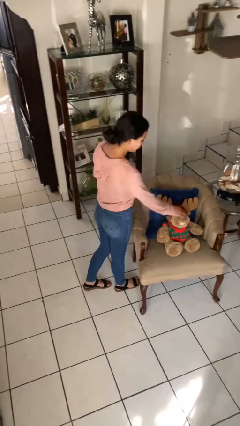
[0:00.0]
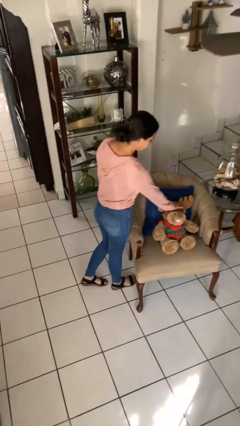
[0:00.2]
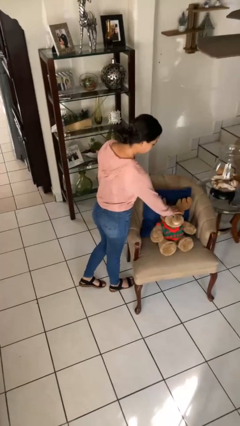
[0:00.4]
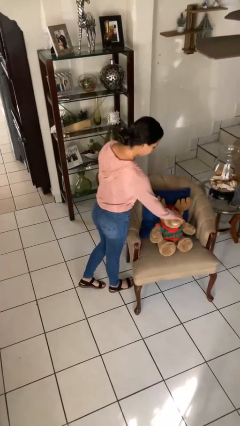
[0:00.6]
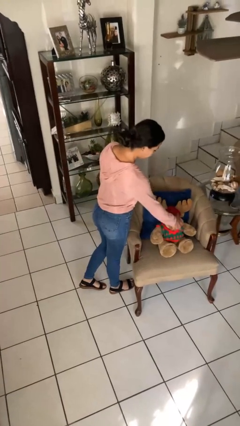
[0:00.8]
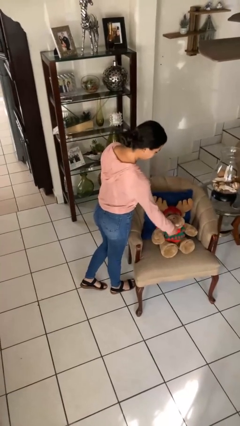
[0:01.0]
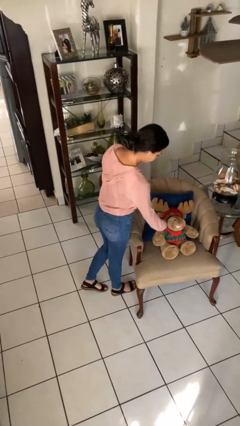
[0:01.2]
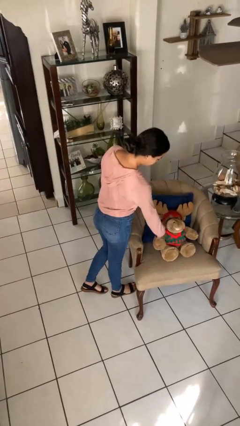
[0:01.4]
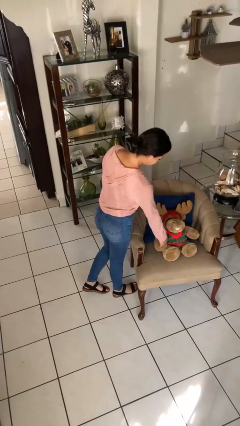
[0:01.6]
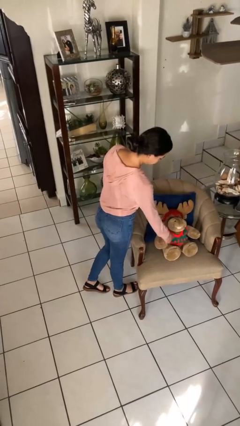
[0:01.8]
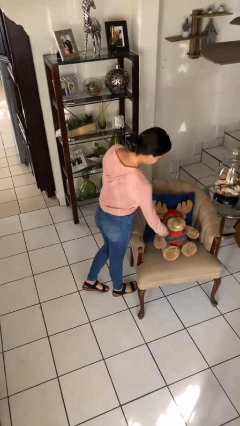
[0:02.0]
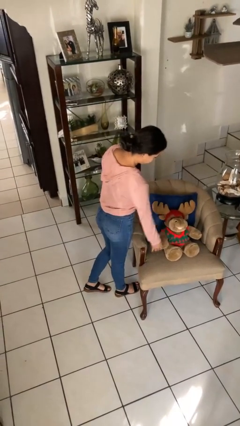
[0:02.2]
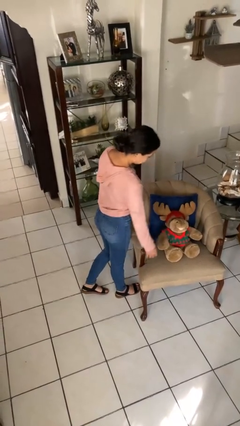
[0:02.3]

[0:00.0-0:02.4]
person waves hand over object

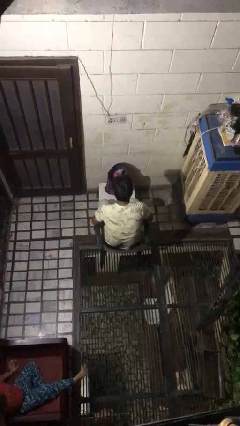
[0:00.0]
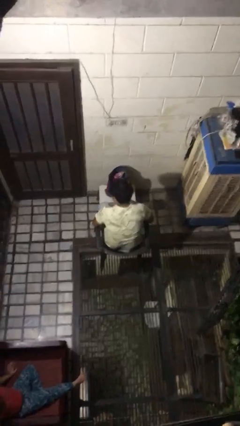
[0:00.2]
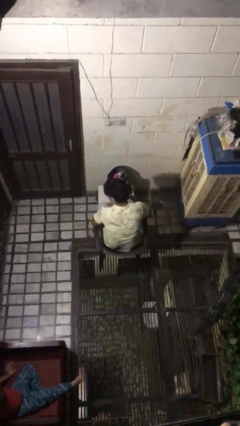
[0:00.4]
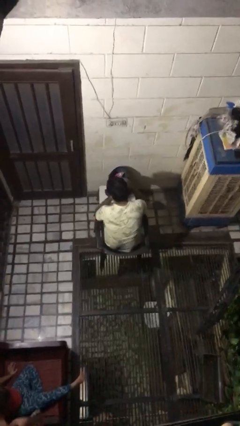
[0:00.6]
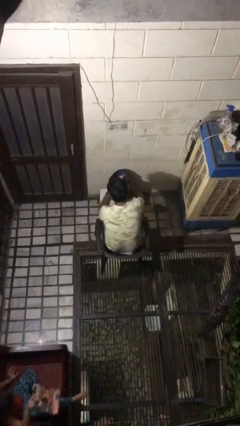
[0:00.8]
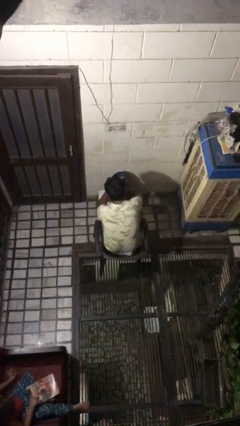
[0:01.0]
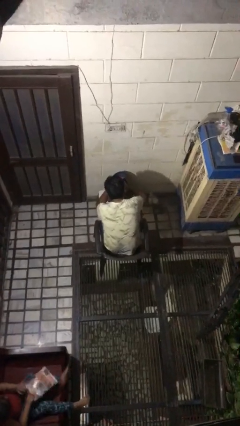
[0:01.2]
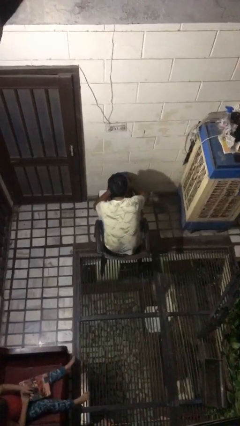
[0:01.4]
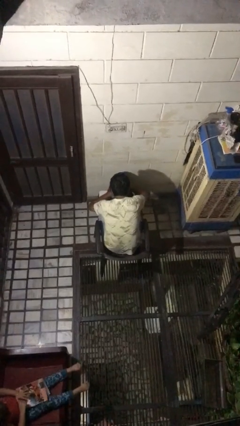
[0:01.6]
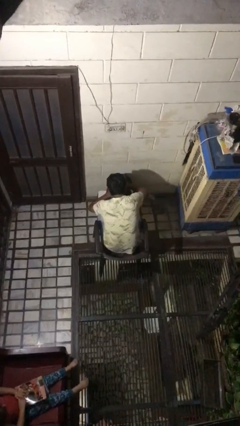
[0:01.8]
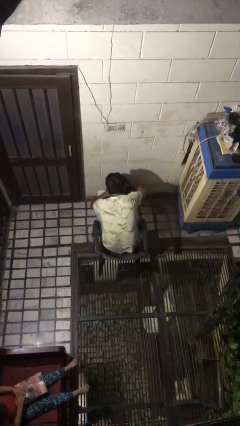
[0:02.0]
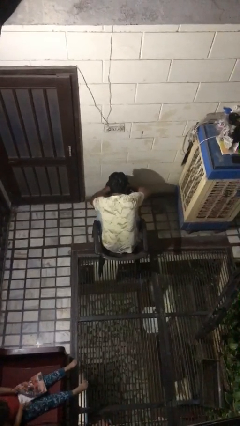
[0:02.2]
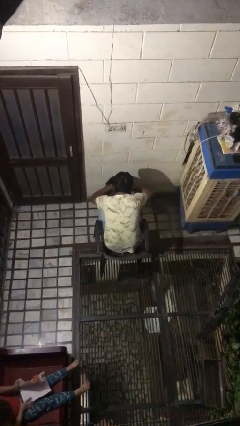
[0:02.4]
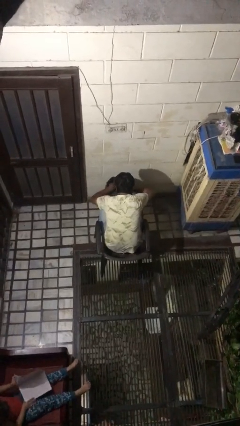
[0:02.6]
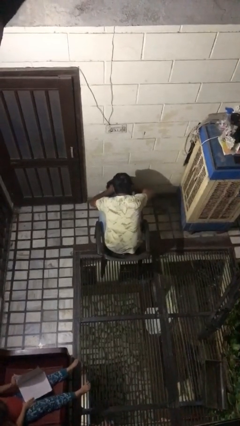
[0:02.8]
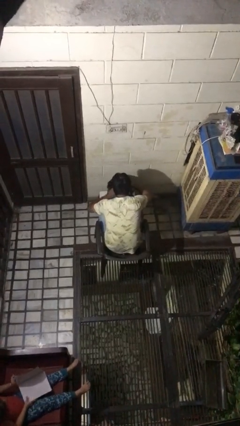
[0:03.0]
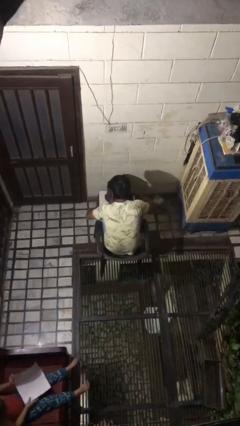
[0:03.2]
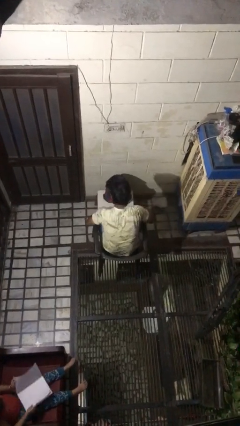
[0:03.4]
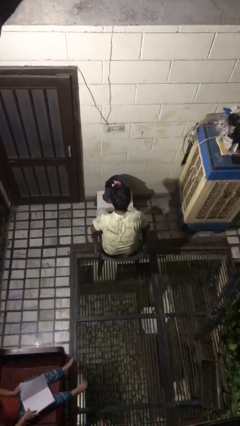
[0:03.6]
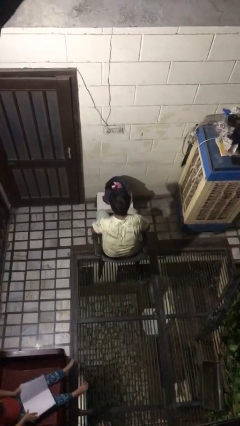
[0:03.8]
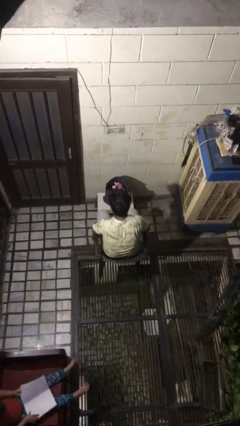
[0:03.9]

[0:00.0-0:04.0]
person searches in bag

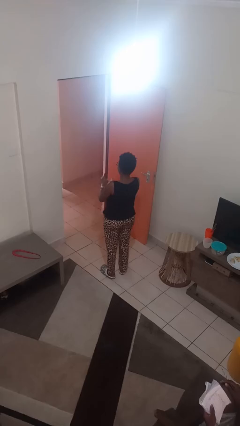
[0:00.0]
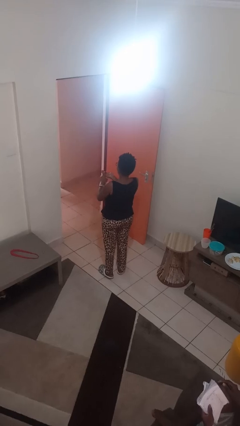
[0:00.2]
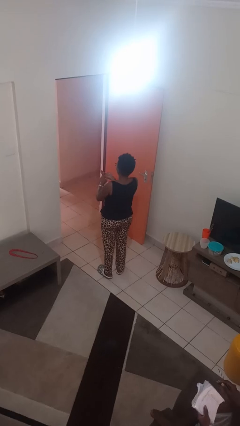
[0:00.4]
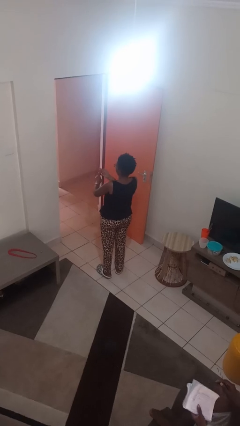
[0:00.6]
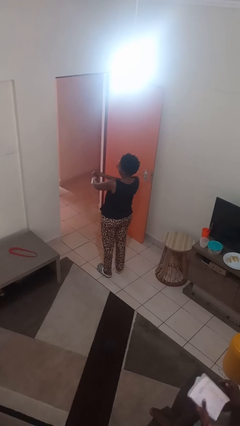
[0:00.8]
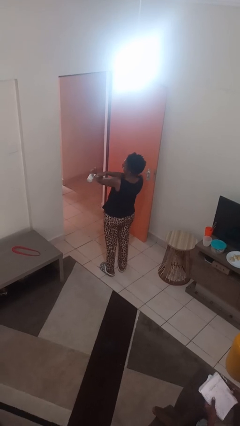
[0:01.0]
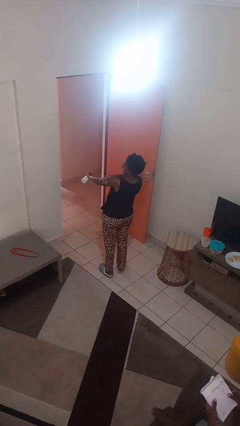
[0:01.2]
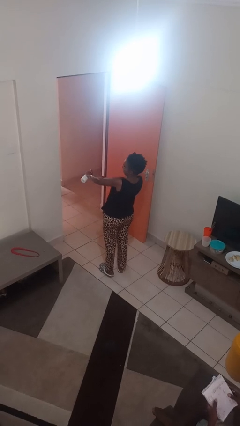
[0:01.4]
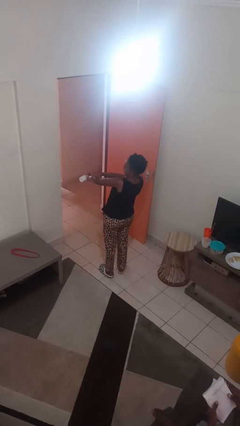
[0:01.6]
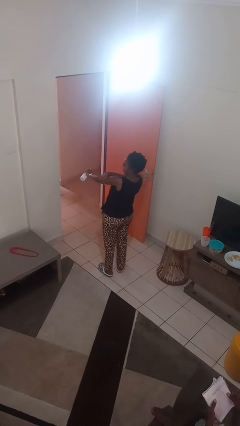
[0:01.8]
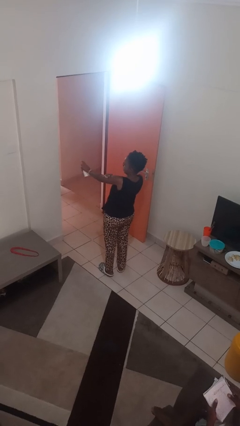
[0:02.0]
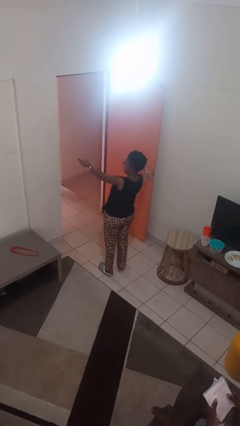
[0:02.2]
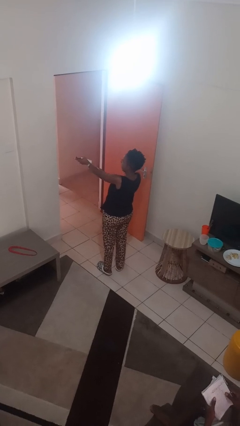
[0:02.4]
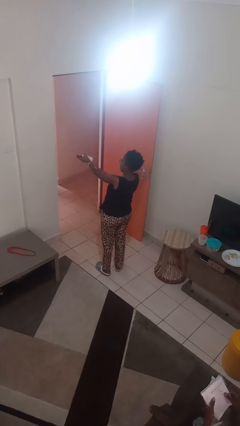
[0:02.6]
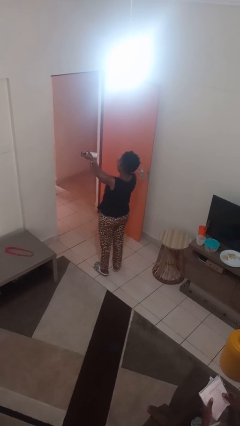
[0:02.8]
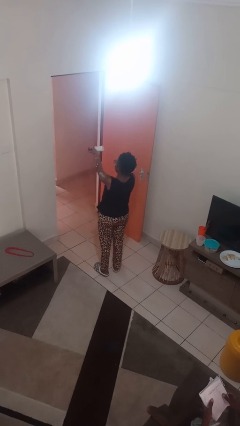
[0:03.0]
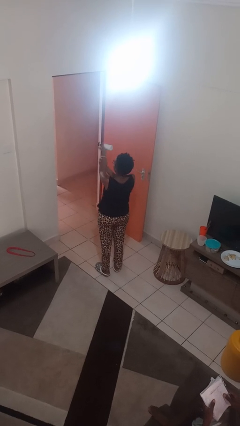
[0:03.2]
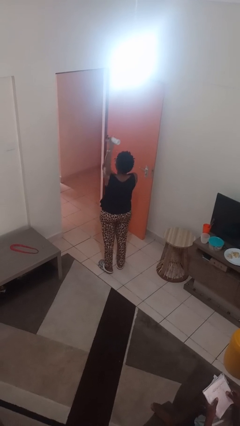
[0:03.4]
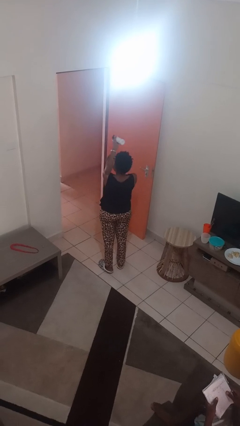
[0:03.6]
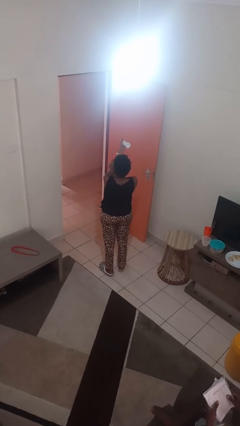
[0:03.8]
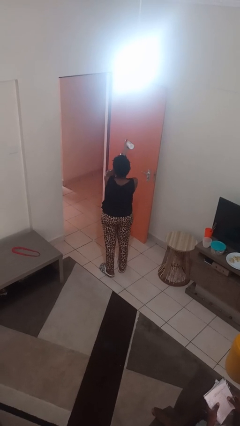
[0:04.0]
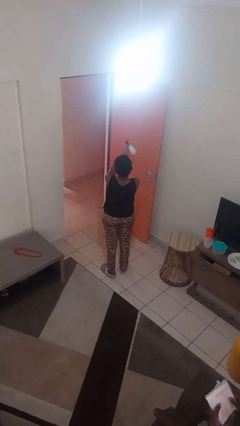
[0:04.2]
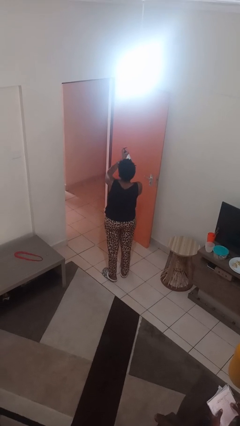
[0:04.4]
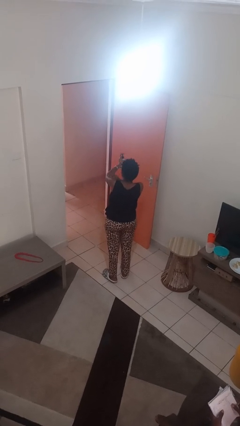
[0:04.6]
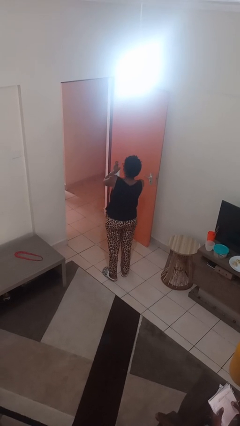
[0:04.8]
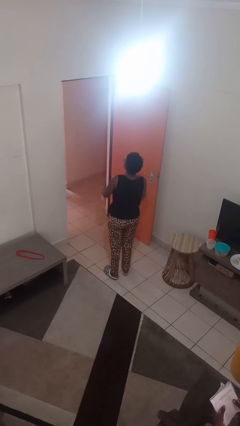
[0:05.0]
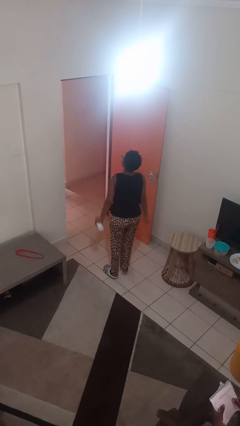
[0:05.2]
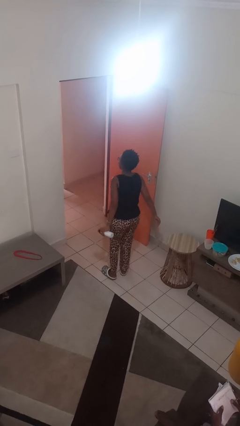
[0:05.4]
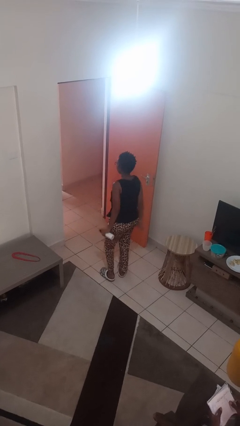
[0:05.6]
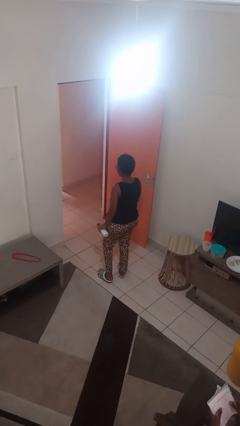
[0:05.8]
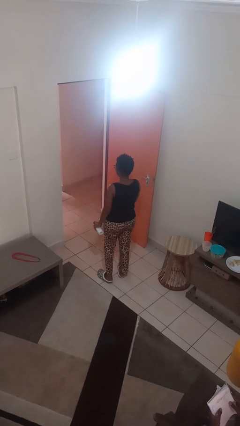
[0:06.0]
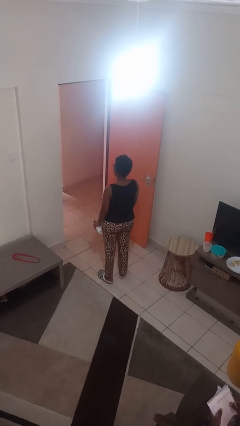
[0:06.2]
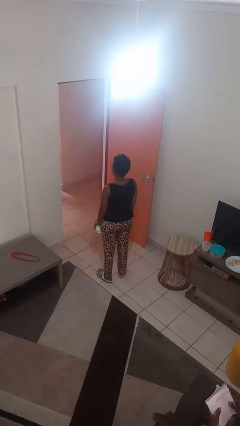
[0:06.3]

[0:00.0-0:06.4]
person applies sunscreen

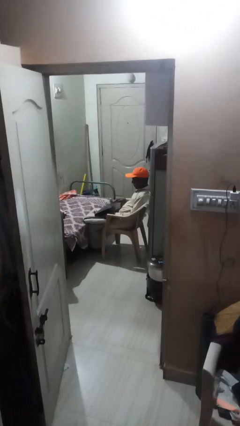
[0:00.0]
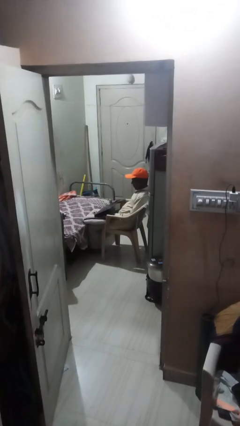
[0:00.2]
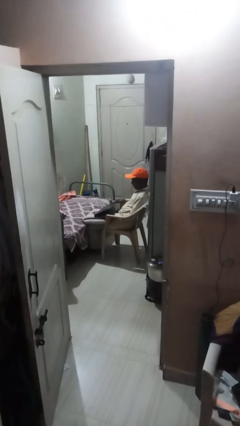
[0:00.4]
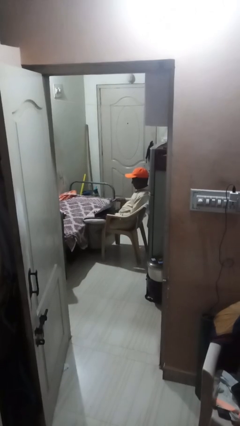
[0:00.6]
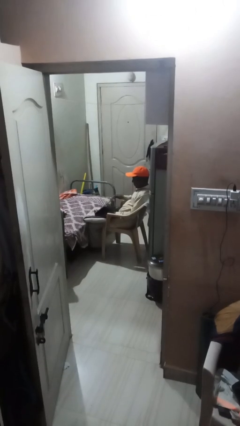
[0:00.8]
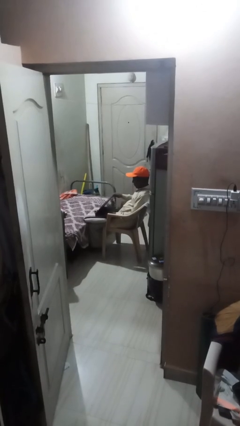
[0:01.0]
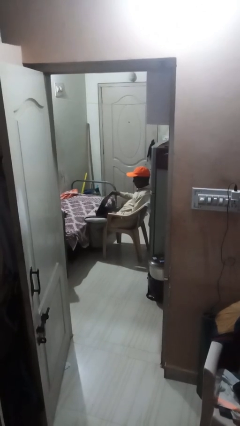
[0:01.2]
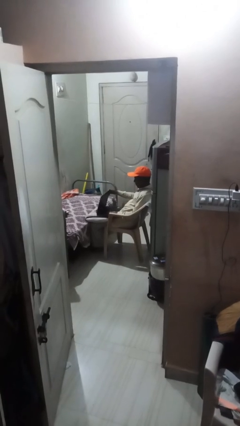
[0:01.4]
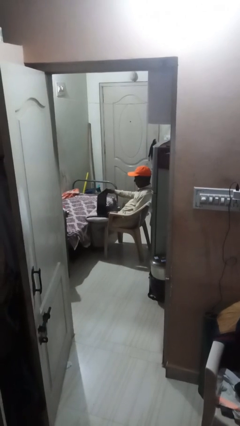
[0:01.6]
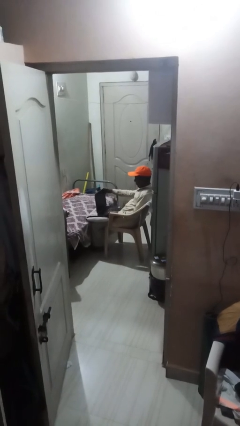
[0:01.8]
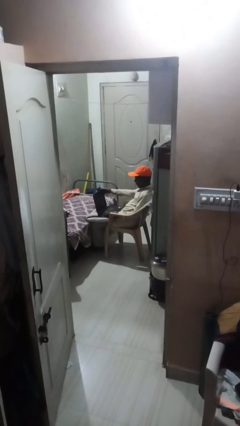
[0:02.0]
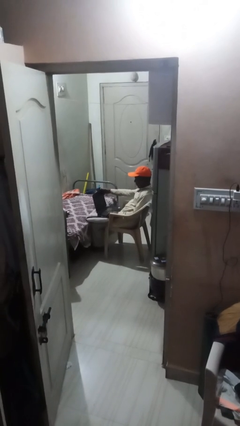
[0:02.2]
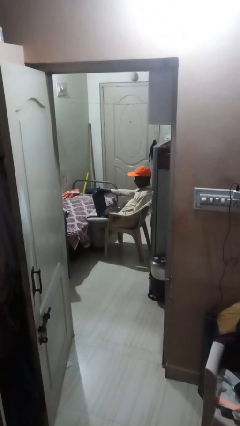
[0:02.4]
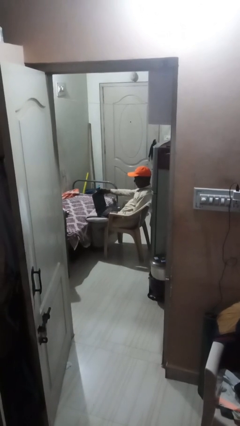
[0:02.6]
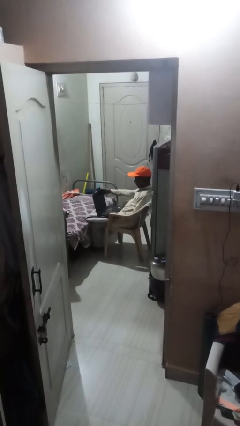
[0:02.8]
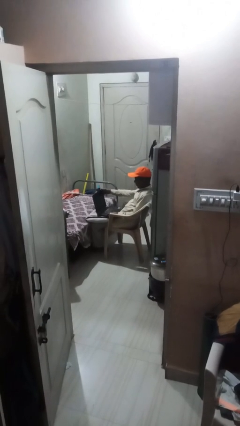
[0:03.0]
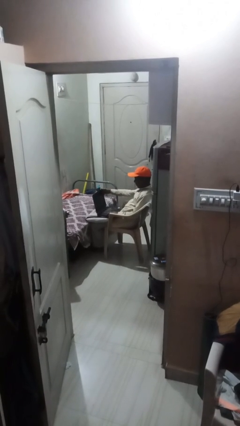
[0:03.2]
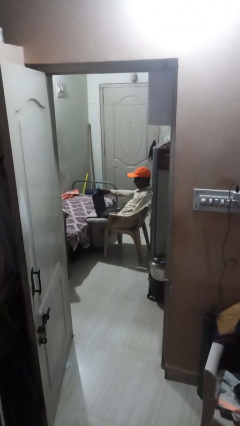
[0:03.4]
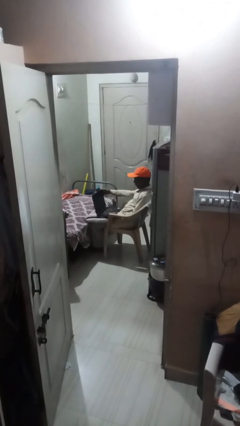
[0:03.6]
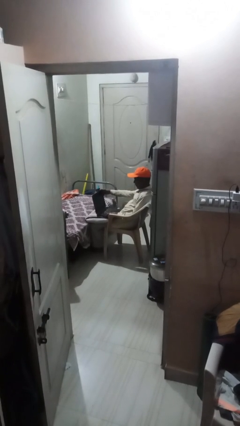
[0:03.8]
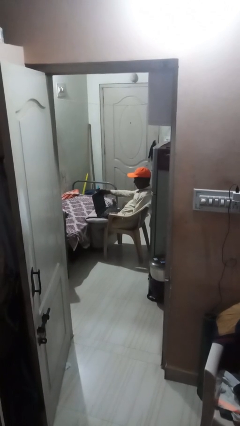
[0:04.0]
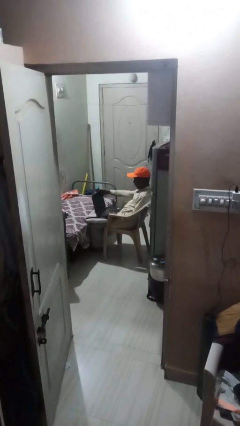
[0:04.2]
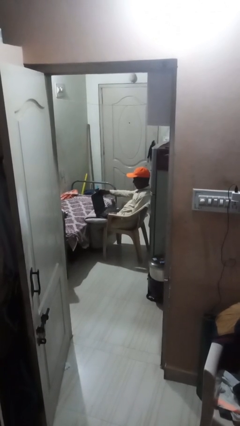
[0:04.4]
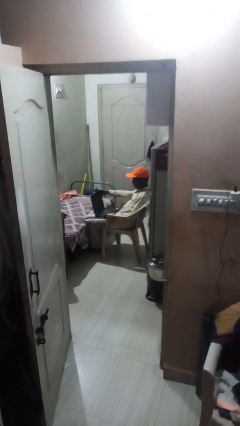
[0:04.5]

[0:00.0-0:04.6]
person interacts with laptop

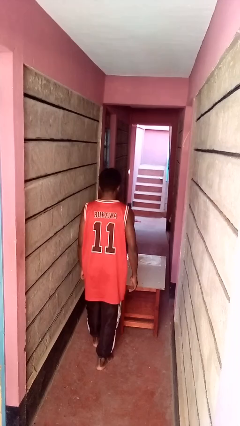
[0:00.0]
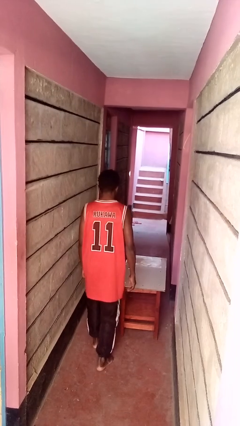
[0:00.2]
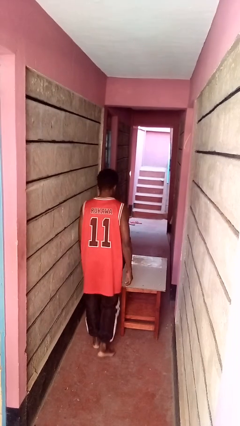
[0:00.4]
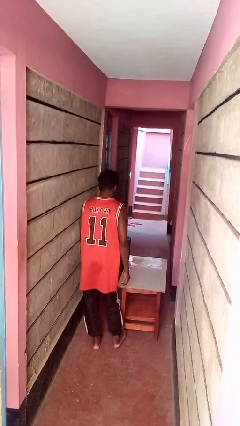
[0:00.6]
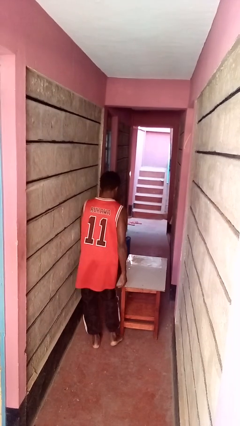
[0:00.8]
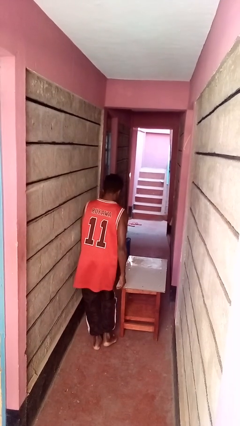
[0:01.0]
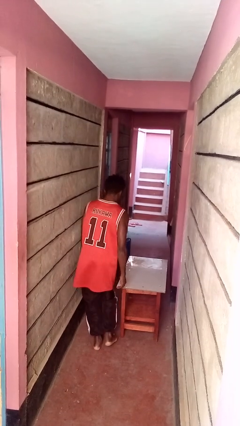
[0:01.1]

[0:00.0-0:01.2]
person stubs toe
